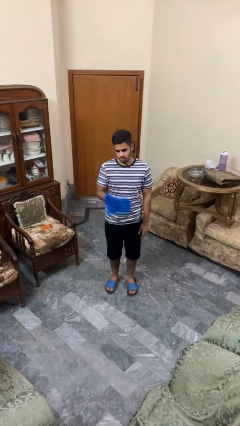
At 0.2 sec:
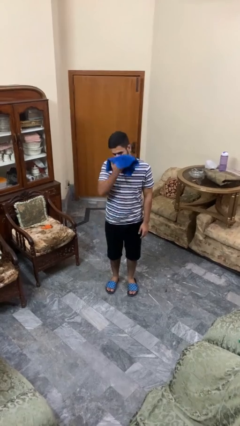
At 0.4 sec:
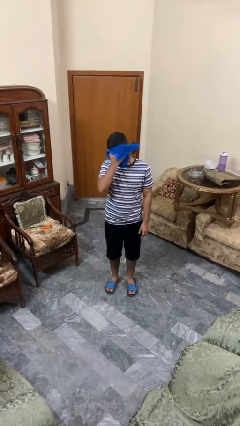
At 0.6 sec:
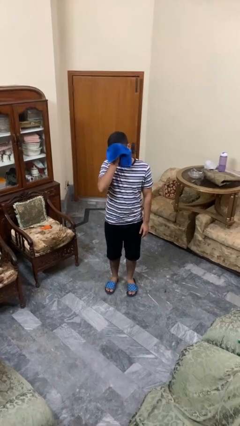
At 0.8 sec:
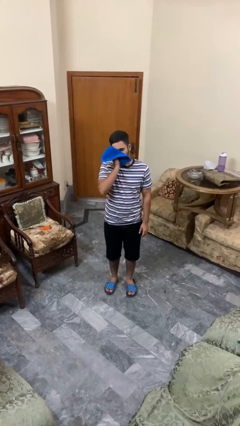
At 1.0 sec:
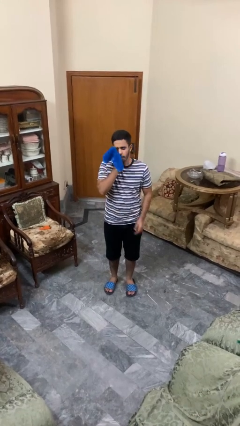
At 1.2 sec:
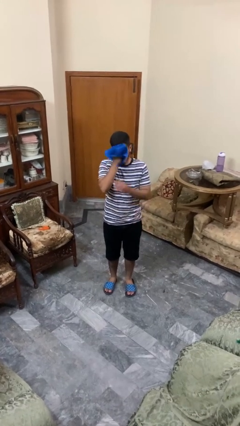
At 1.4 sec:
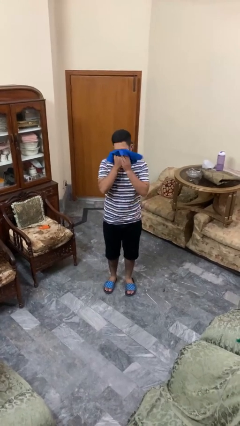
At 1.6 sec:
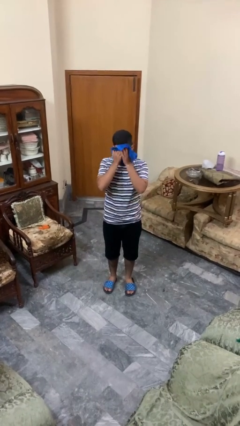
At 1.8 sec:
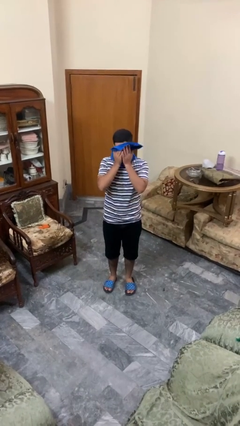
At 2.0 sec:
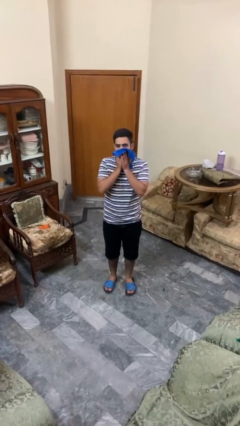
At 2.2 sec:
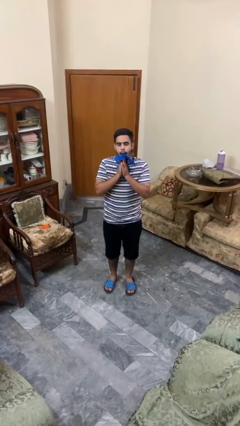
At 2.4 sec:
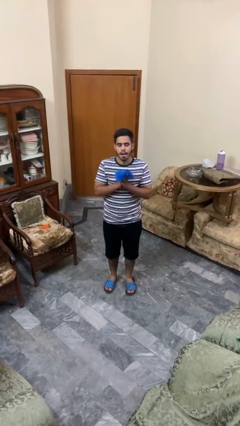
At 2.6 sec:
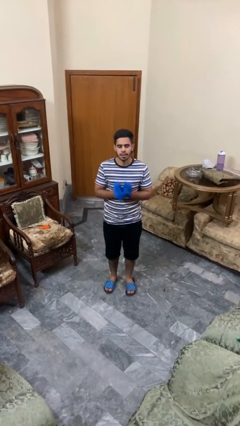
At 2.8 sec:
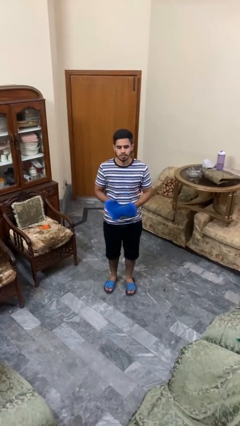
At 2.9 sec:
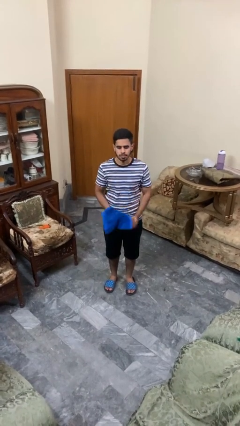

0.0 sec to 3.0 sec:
person wipes mouth with napkin

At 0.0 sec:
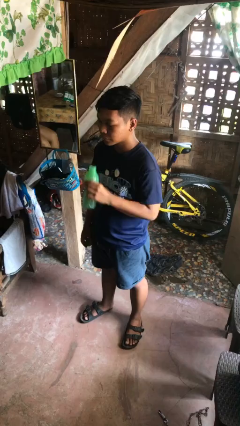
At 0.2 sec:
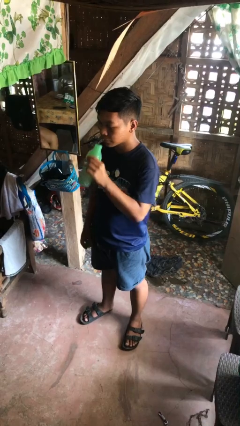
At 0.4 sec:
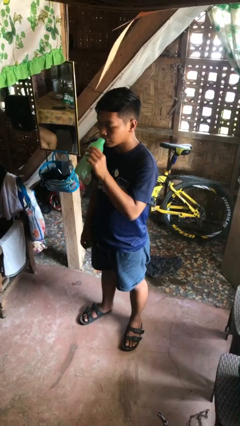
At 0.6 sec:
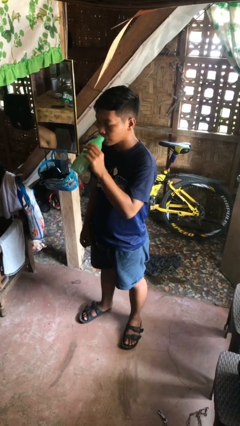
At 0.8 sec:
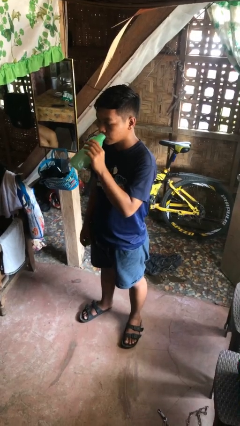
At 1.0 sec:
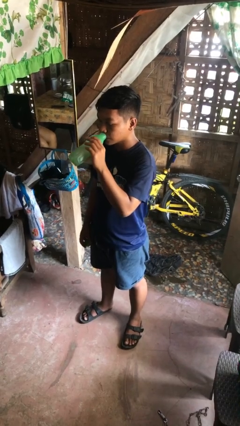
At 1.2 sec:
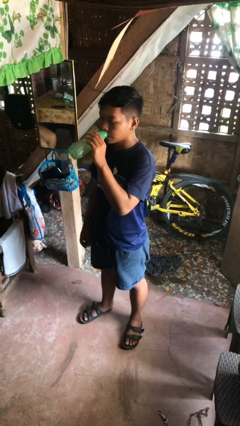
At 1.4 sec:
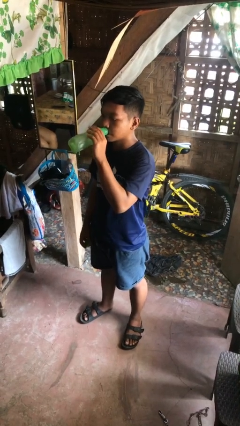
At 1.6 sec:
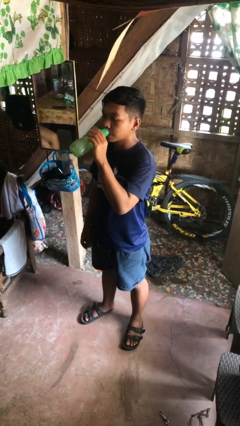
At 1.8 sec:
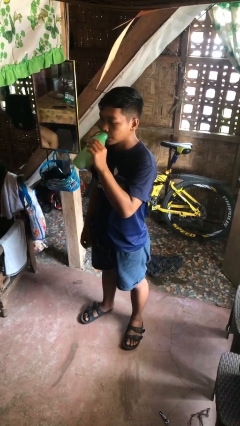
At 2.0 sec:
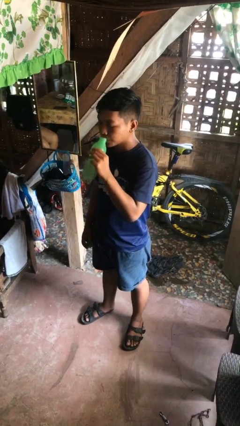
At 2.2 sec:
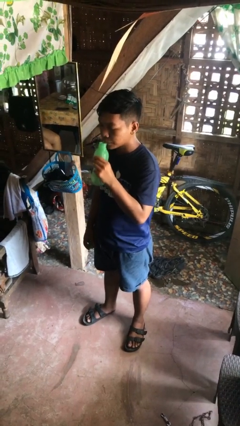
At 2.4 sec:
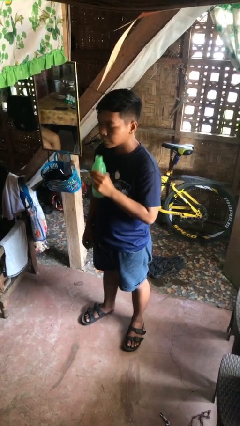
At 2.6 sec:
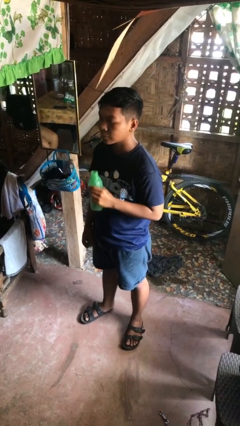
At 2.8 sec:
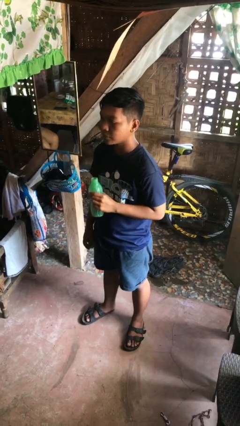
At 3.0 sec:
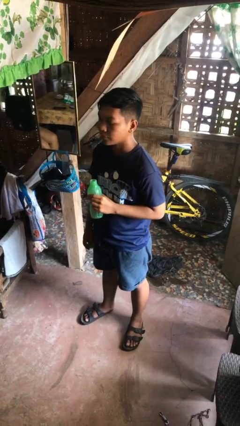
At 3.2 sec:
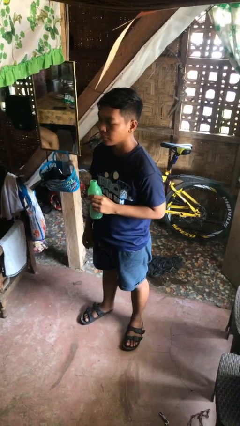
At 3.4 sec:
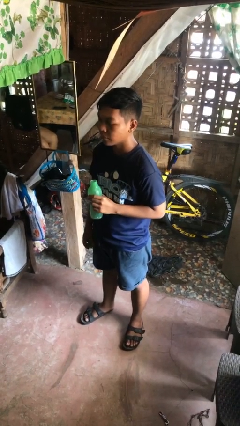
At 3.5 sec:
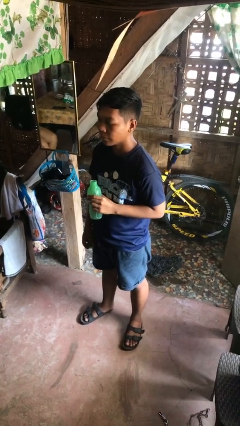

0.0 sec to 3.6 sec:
person drinks from bottle

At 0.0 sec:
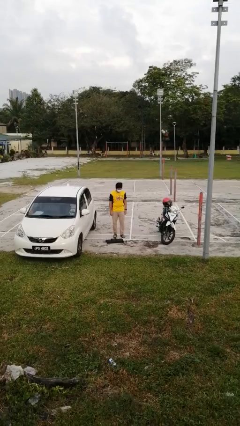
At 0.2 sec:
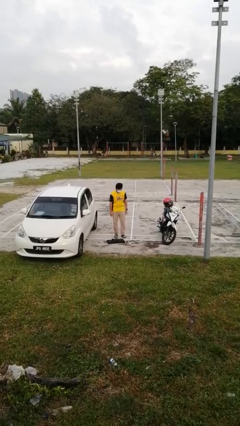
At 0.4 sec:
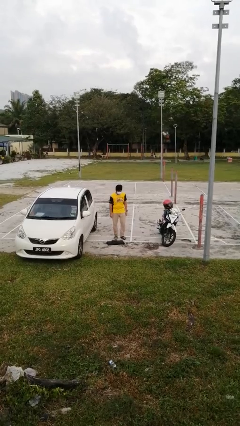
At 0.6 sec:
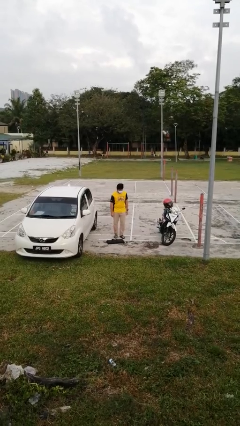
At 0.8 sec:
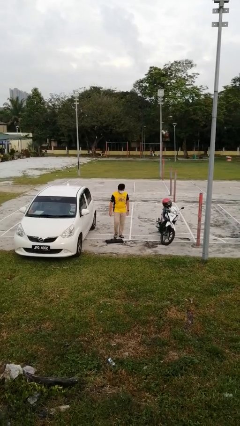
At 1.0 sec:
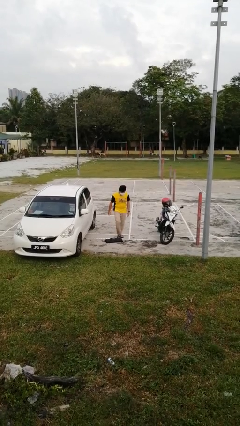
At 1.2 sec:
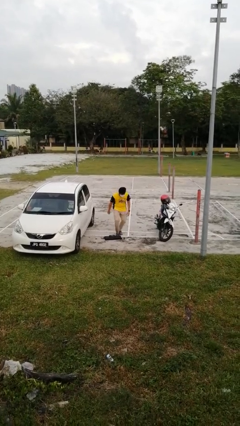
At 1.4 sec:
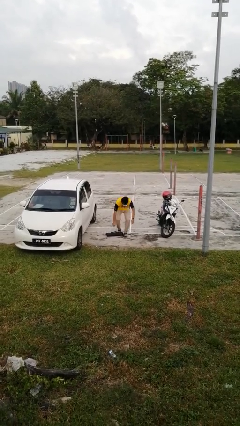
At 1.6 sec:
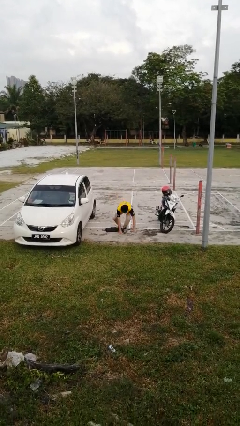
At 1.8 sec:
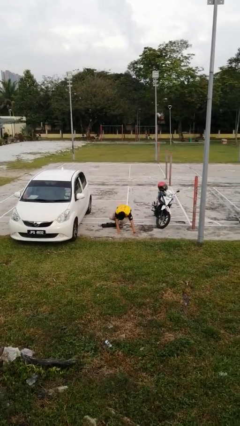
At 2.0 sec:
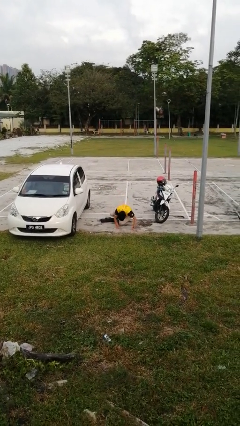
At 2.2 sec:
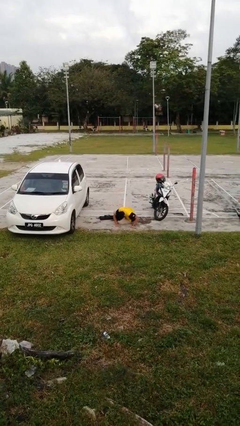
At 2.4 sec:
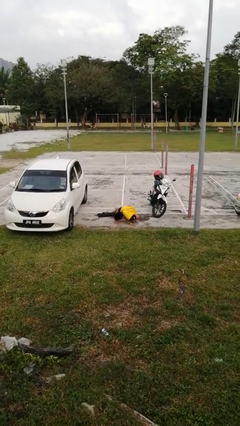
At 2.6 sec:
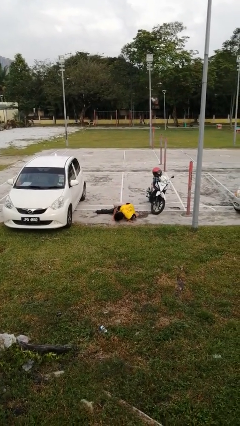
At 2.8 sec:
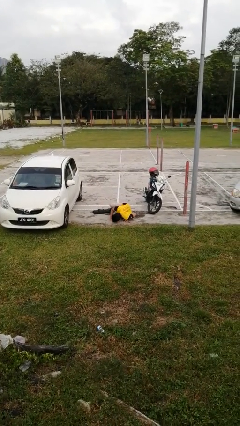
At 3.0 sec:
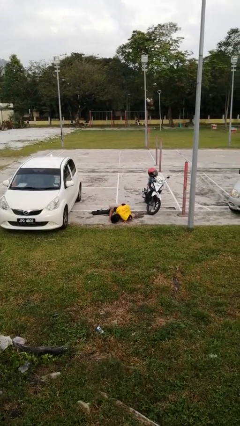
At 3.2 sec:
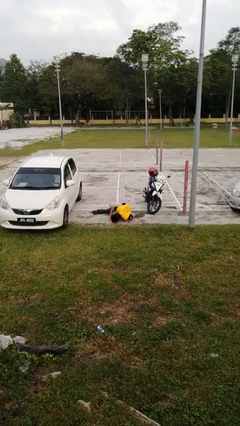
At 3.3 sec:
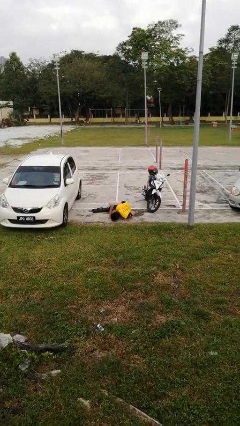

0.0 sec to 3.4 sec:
person trips on object on floor

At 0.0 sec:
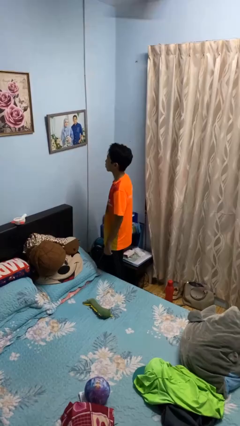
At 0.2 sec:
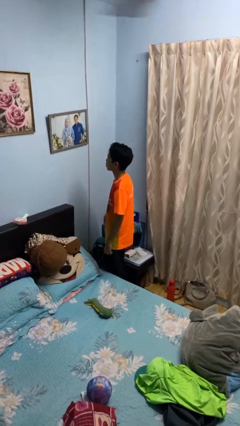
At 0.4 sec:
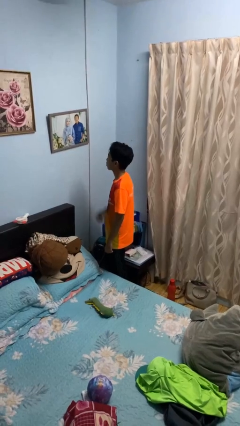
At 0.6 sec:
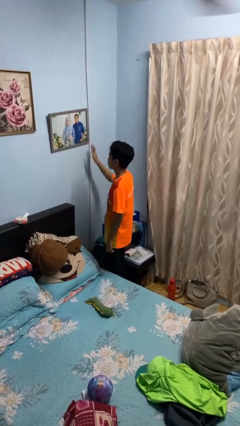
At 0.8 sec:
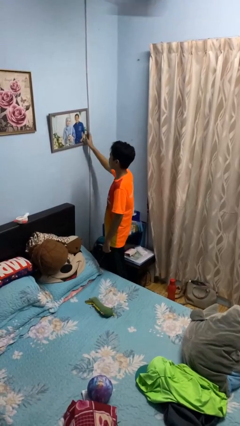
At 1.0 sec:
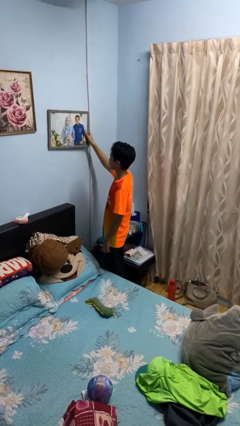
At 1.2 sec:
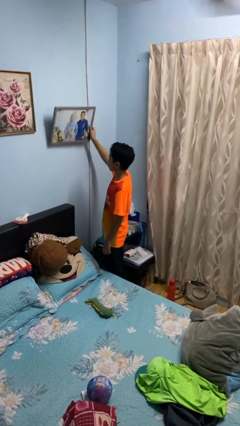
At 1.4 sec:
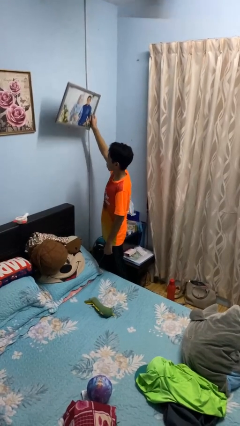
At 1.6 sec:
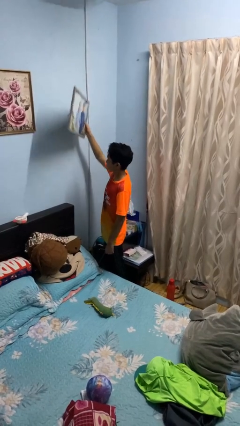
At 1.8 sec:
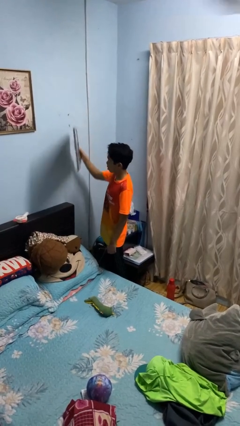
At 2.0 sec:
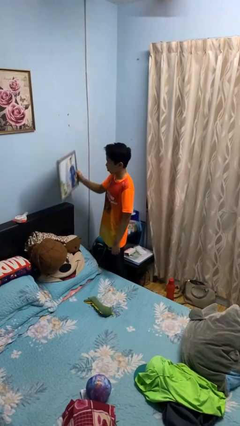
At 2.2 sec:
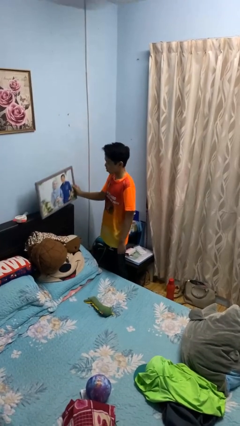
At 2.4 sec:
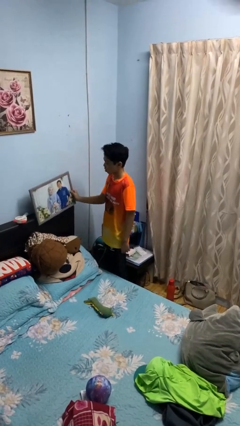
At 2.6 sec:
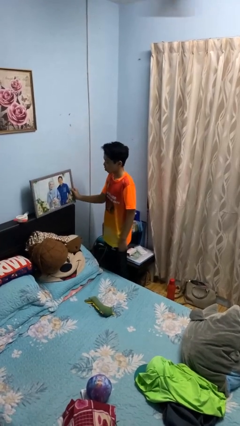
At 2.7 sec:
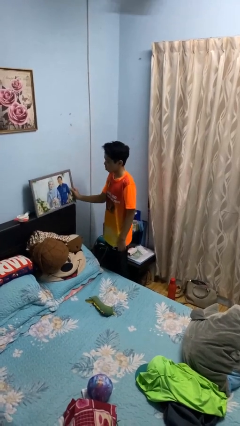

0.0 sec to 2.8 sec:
person takes down picture frame

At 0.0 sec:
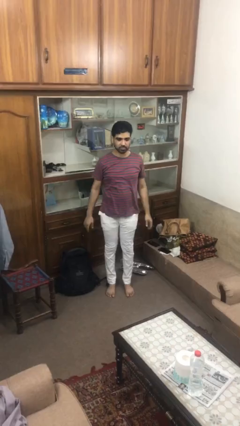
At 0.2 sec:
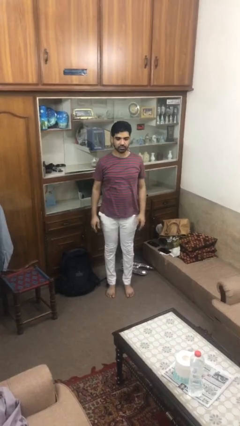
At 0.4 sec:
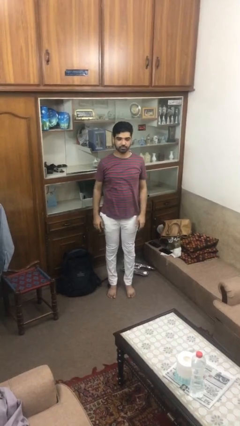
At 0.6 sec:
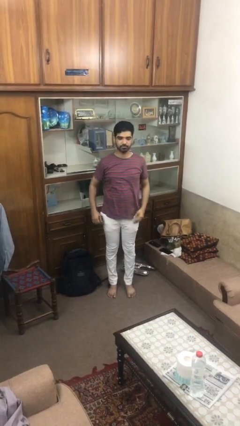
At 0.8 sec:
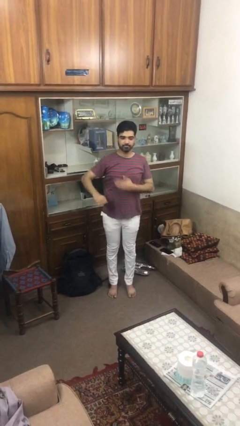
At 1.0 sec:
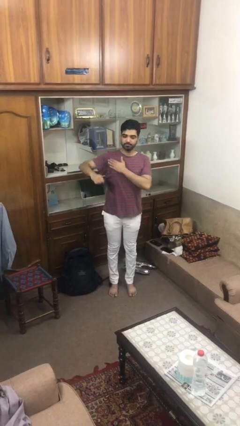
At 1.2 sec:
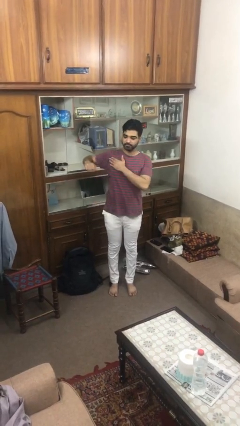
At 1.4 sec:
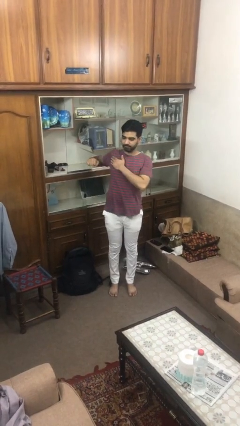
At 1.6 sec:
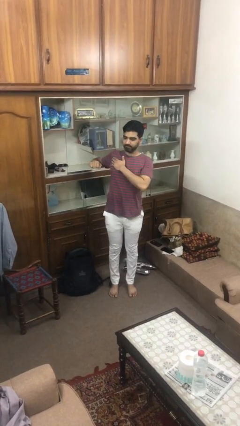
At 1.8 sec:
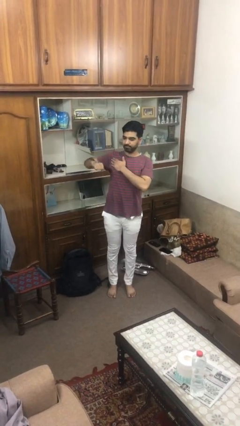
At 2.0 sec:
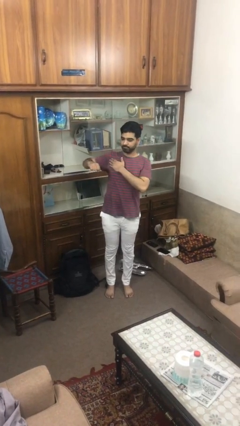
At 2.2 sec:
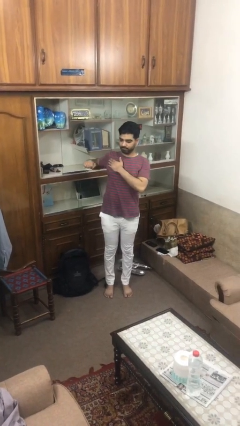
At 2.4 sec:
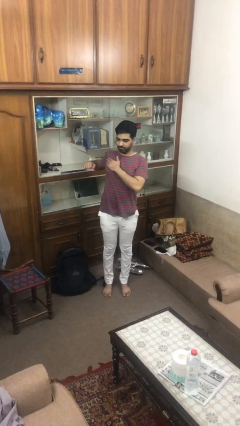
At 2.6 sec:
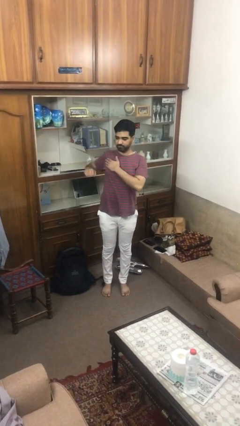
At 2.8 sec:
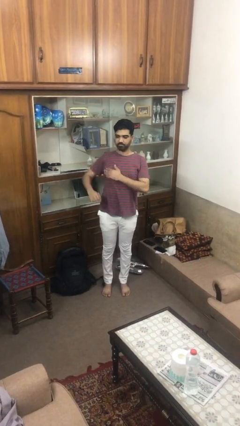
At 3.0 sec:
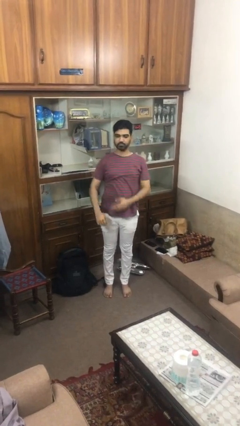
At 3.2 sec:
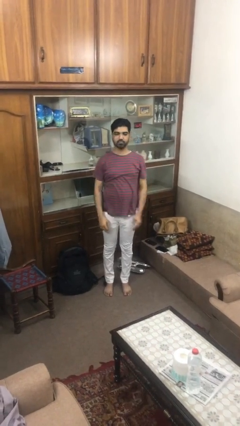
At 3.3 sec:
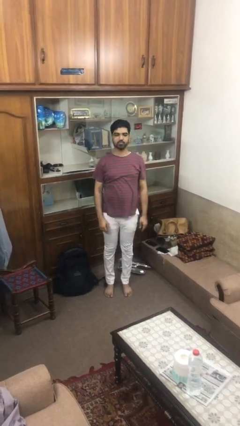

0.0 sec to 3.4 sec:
person stretches arms to side

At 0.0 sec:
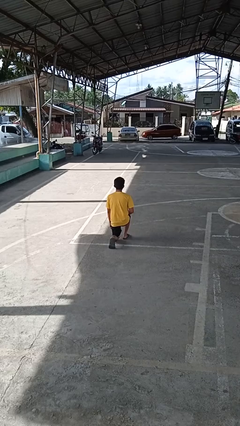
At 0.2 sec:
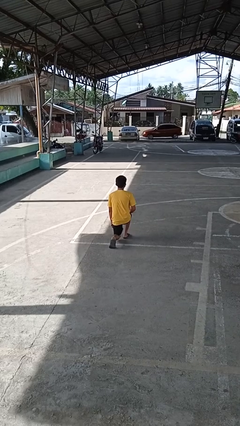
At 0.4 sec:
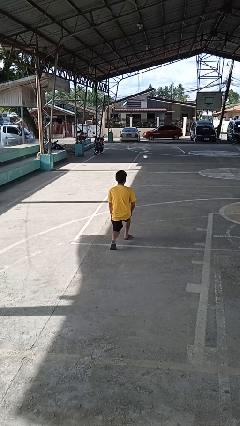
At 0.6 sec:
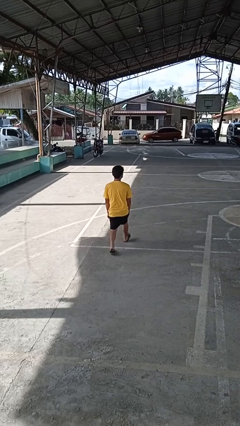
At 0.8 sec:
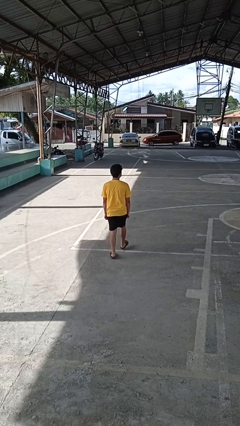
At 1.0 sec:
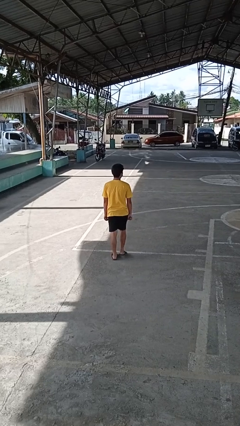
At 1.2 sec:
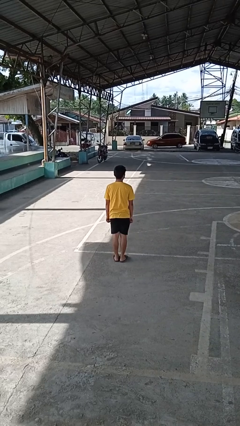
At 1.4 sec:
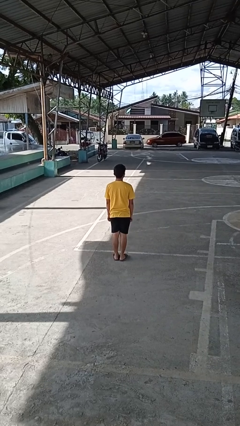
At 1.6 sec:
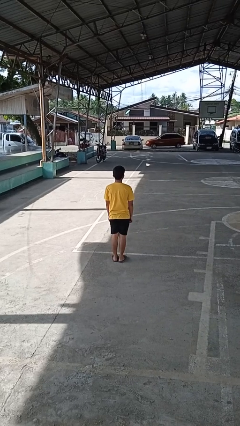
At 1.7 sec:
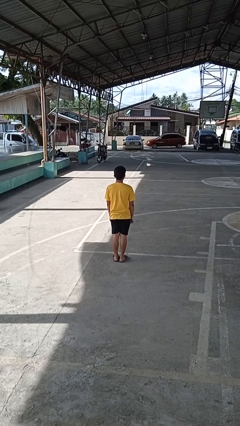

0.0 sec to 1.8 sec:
person stands up from floor
